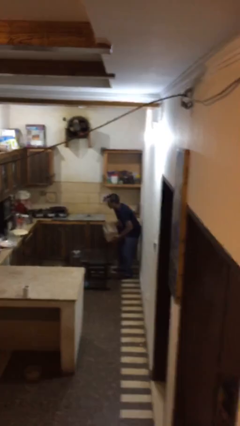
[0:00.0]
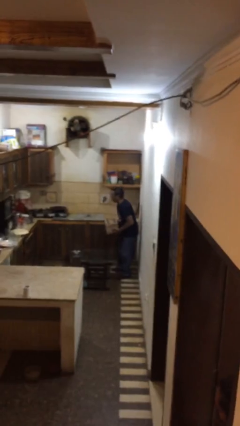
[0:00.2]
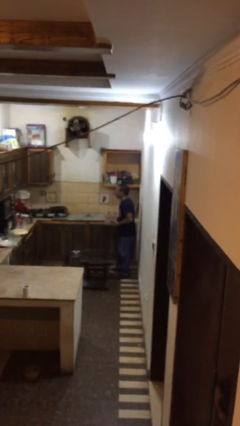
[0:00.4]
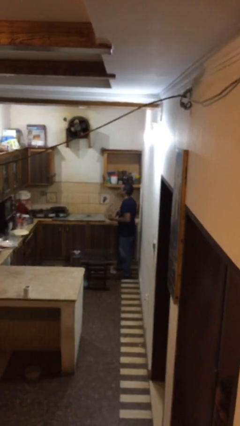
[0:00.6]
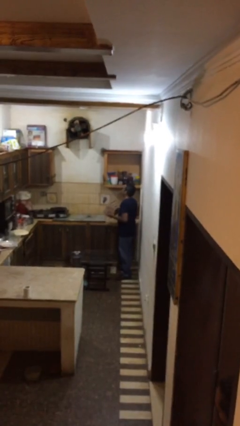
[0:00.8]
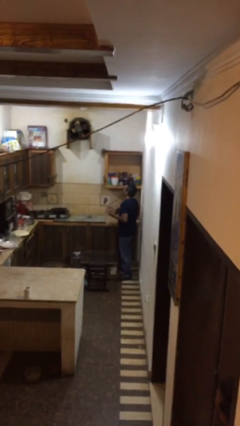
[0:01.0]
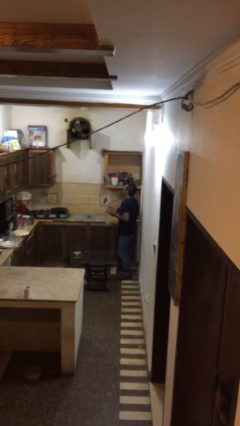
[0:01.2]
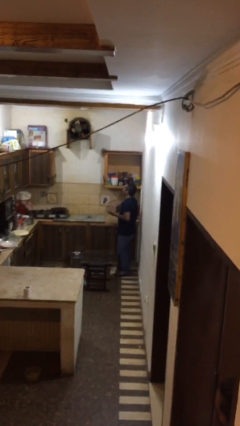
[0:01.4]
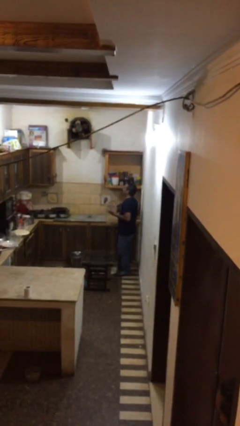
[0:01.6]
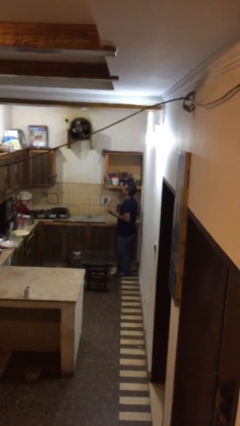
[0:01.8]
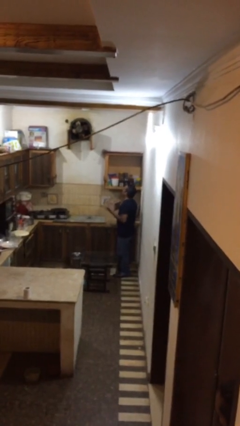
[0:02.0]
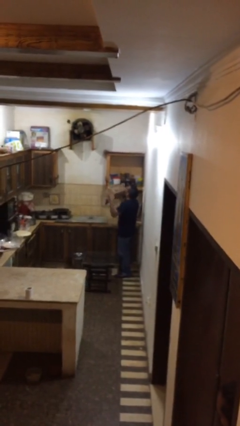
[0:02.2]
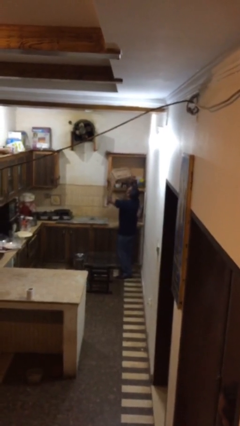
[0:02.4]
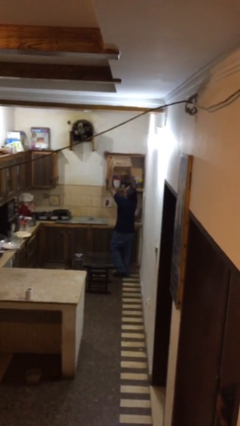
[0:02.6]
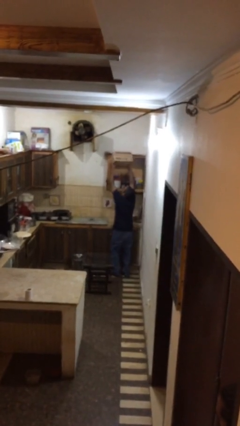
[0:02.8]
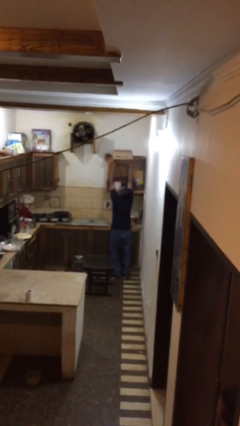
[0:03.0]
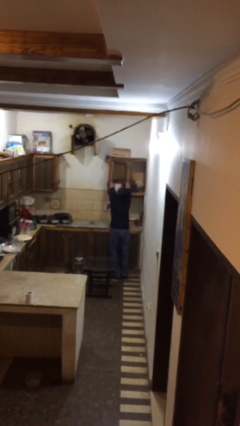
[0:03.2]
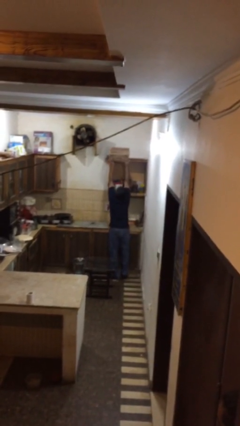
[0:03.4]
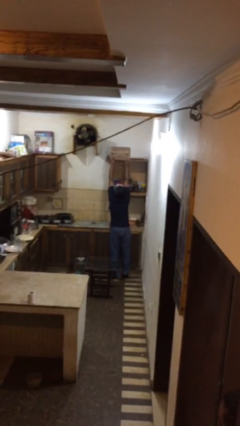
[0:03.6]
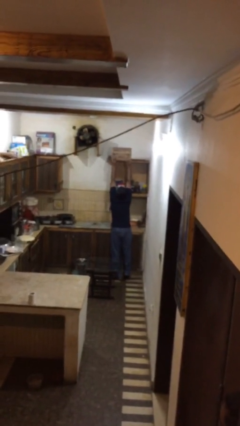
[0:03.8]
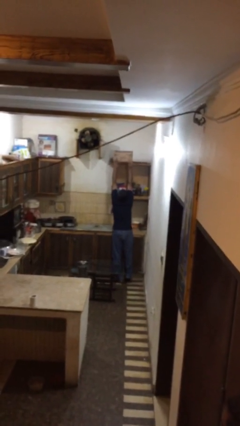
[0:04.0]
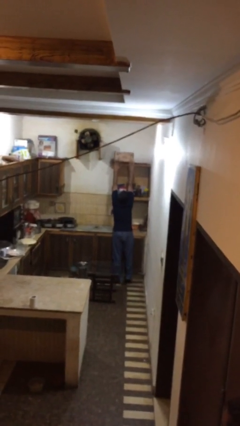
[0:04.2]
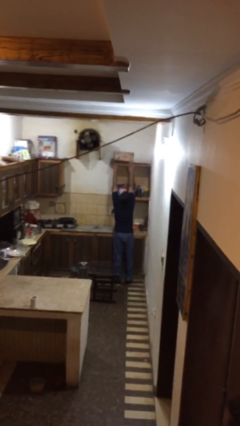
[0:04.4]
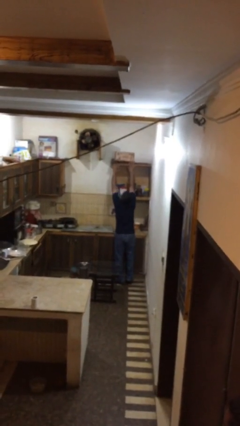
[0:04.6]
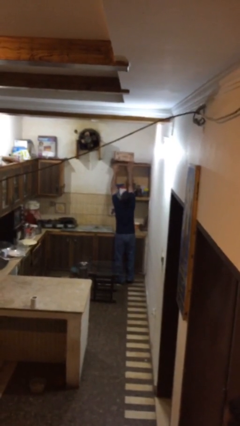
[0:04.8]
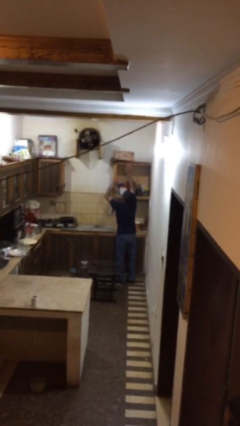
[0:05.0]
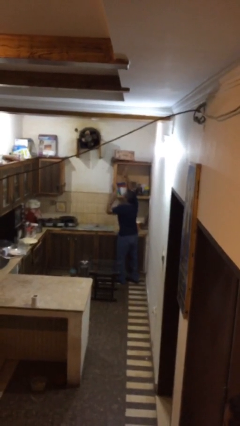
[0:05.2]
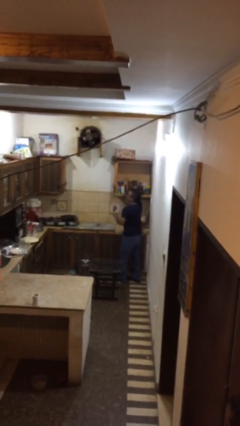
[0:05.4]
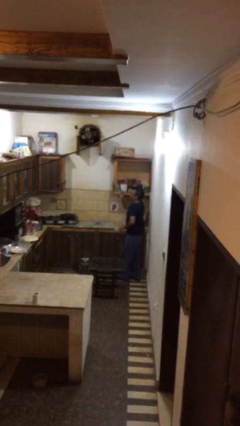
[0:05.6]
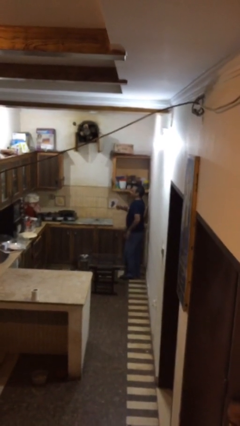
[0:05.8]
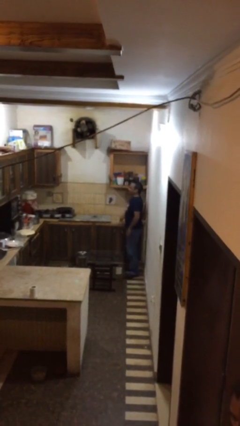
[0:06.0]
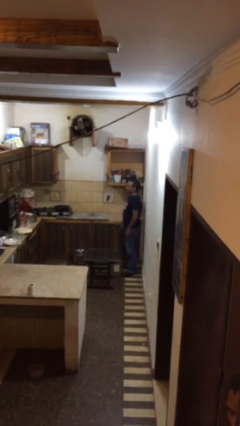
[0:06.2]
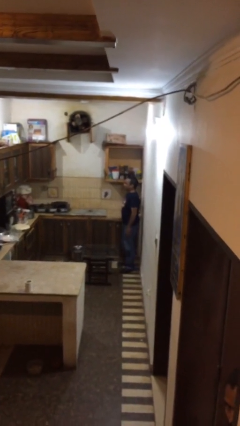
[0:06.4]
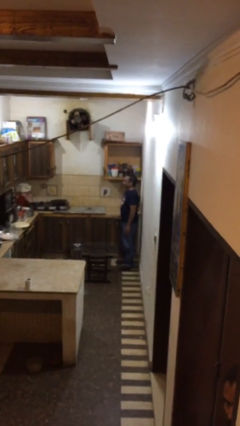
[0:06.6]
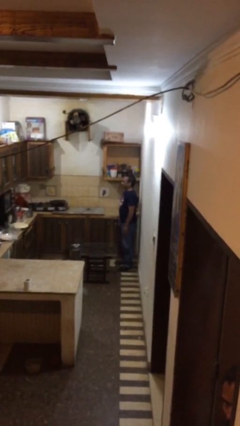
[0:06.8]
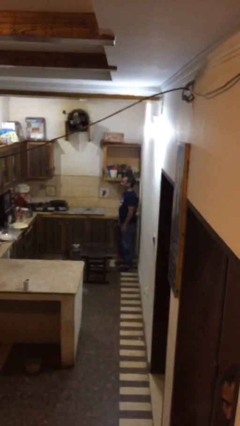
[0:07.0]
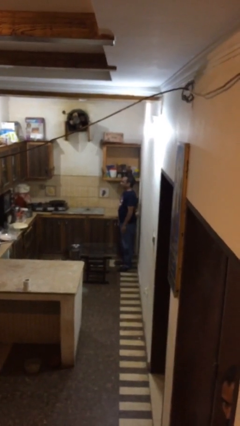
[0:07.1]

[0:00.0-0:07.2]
person puts down object on shelf

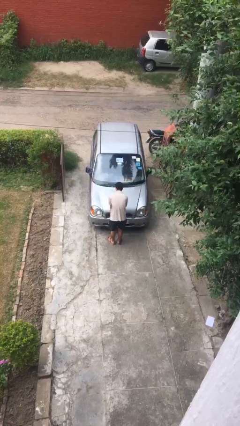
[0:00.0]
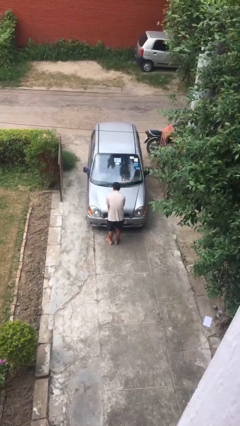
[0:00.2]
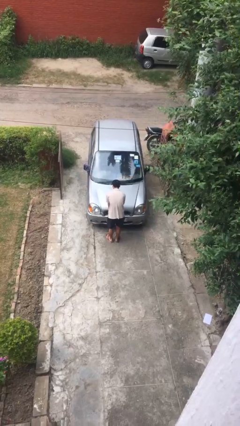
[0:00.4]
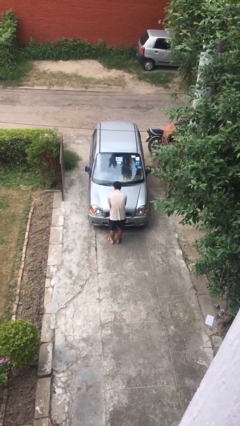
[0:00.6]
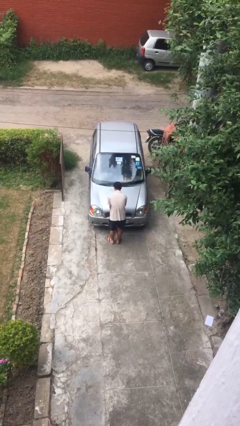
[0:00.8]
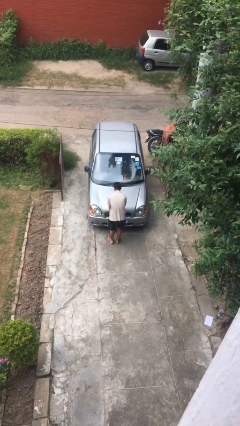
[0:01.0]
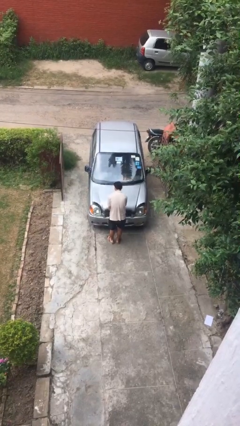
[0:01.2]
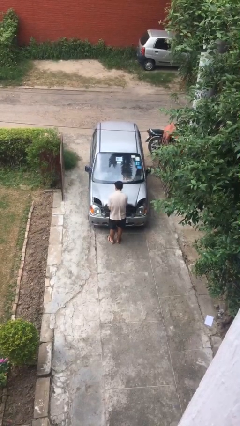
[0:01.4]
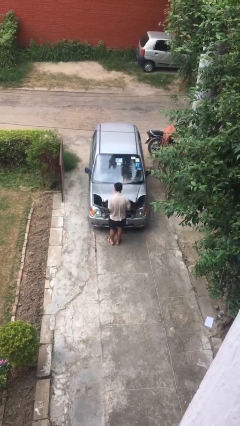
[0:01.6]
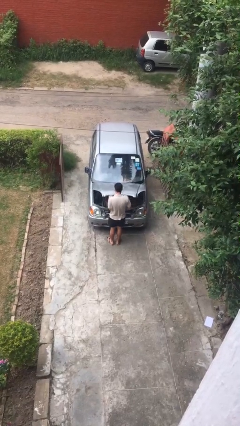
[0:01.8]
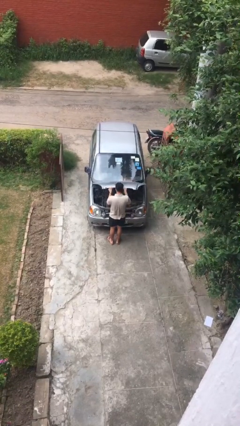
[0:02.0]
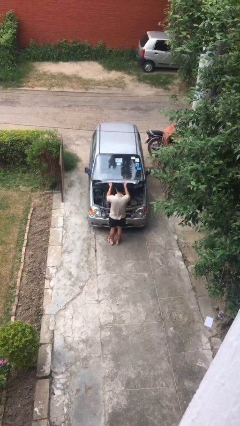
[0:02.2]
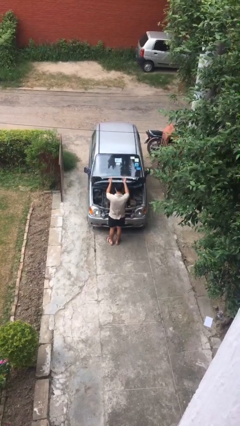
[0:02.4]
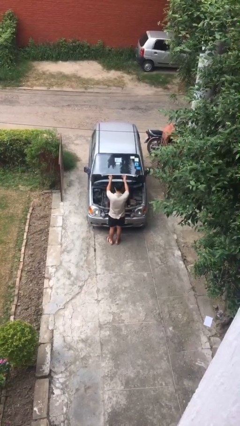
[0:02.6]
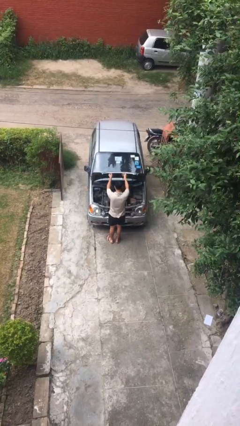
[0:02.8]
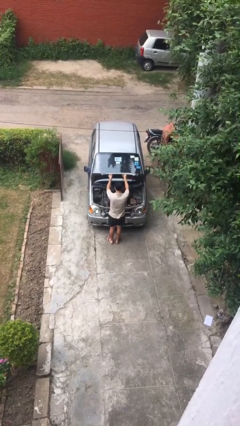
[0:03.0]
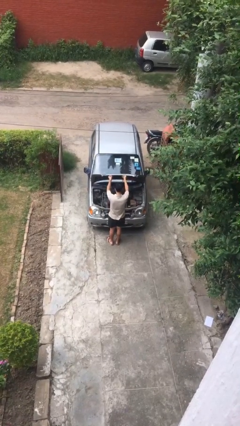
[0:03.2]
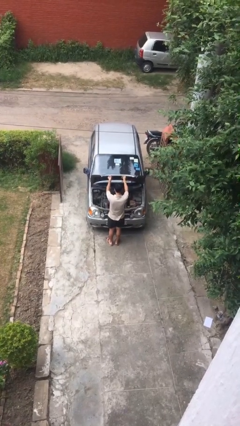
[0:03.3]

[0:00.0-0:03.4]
person opens car hood

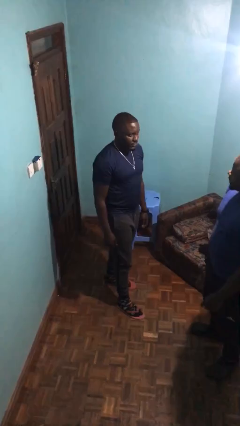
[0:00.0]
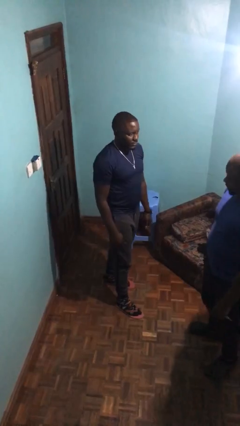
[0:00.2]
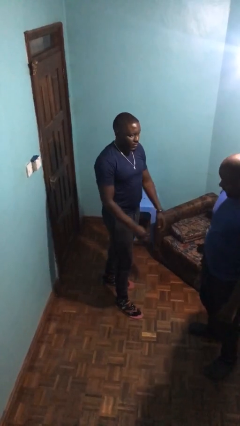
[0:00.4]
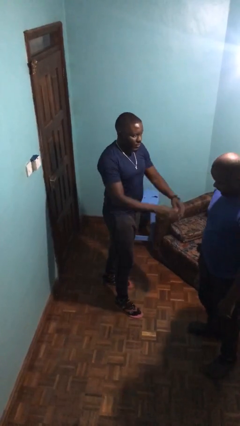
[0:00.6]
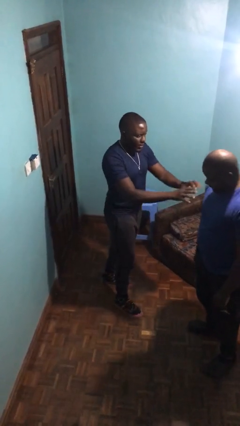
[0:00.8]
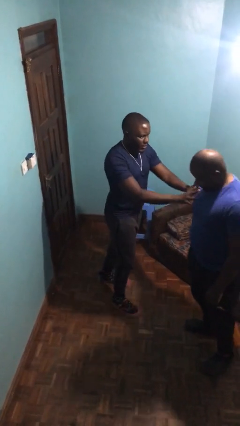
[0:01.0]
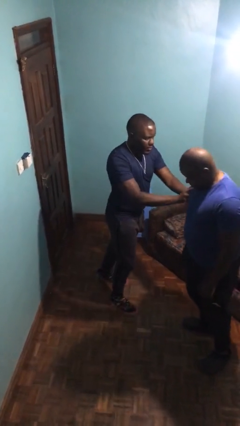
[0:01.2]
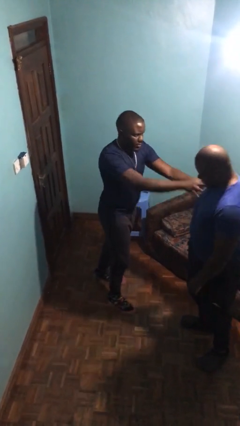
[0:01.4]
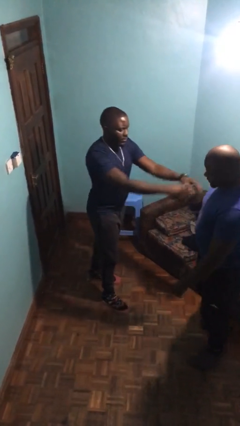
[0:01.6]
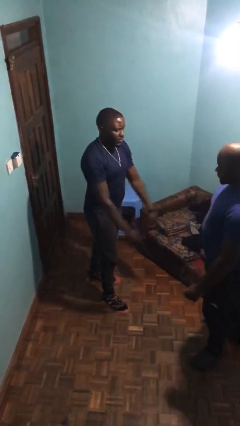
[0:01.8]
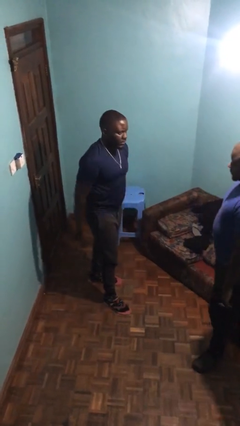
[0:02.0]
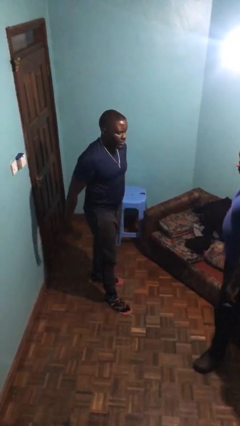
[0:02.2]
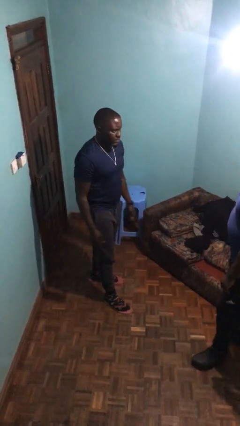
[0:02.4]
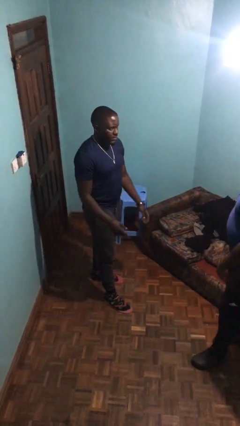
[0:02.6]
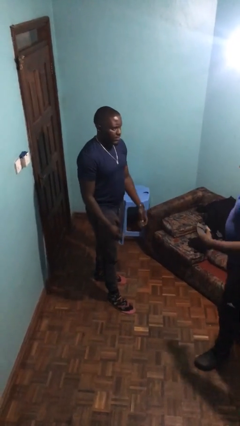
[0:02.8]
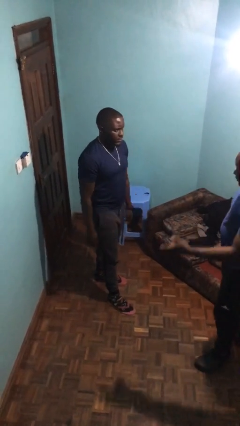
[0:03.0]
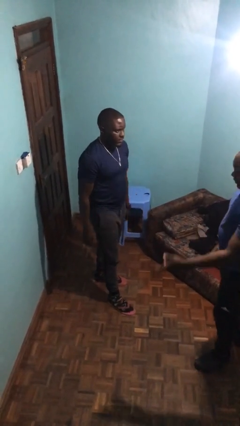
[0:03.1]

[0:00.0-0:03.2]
person shoves person

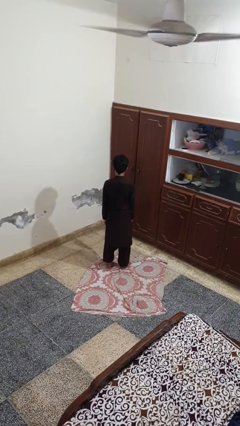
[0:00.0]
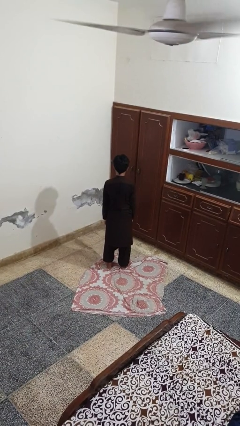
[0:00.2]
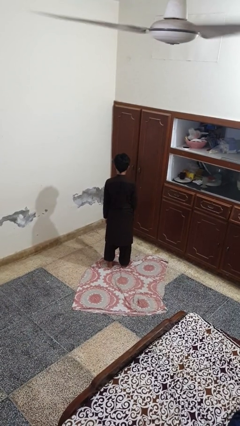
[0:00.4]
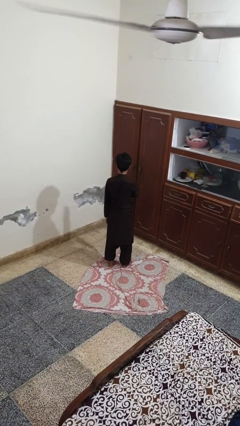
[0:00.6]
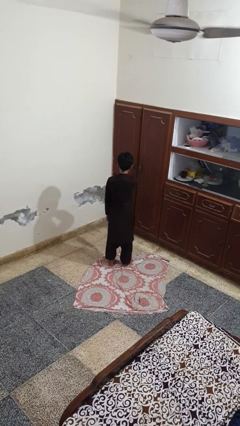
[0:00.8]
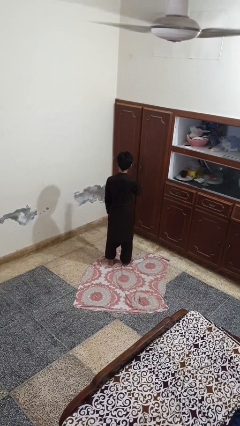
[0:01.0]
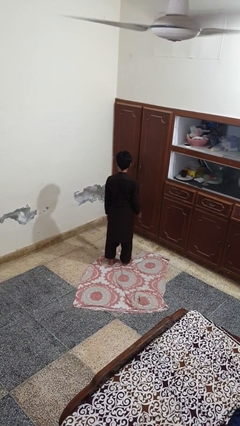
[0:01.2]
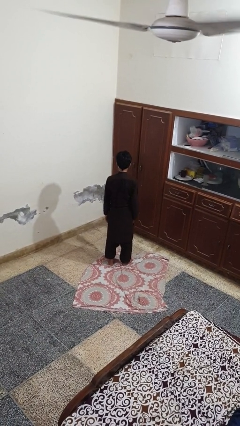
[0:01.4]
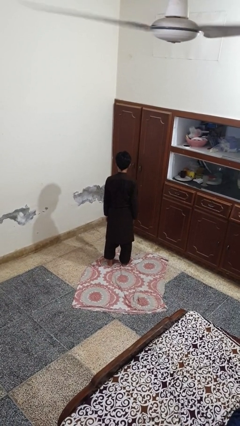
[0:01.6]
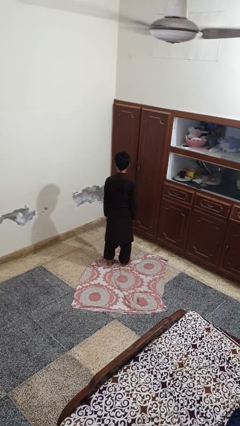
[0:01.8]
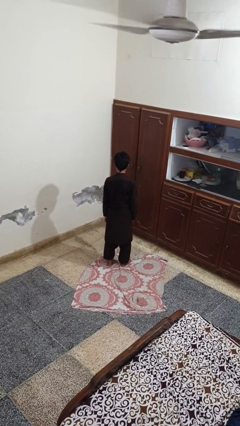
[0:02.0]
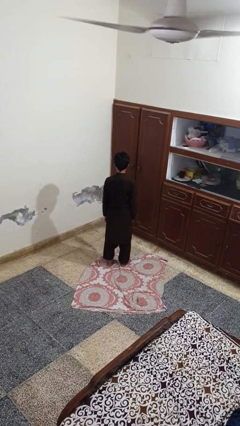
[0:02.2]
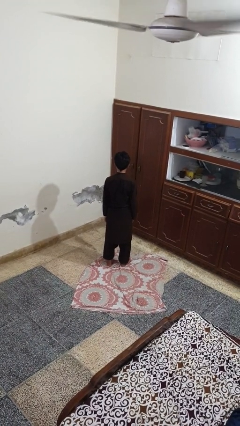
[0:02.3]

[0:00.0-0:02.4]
person karate chop

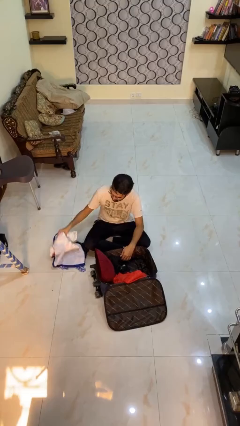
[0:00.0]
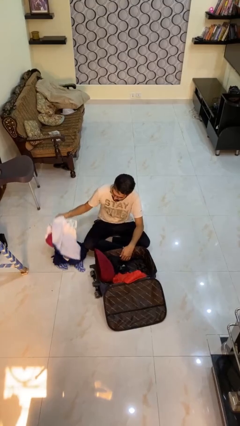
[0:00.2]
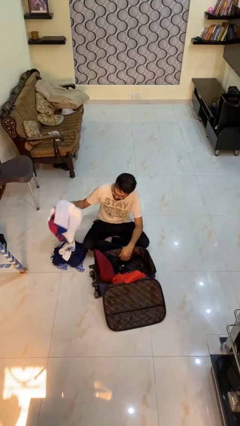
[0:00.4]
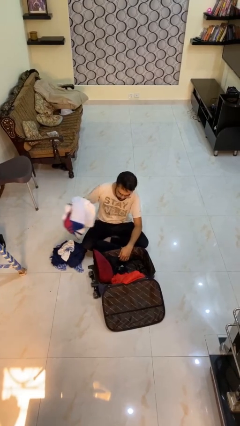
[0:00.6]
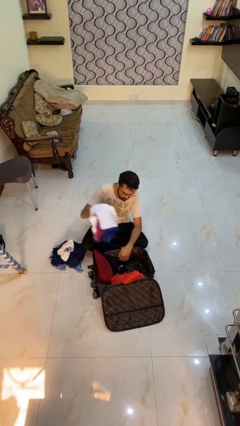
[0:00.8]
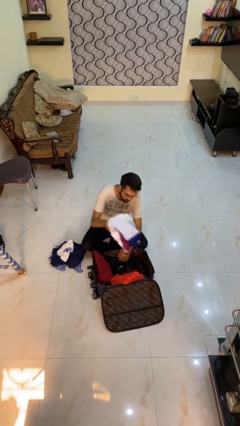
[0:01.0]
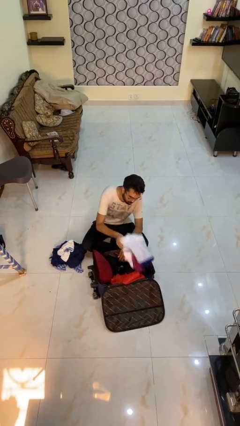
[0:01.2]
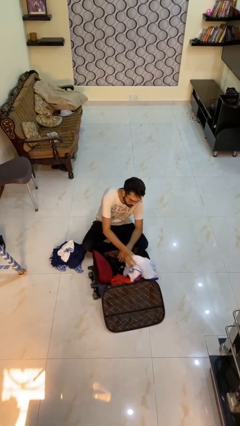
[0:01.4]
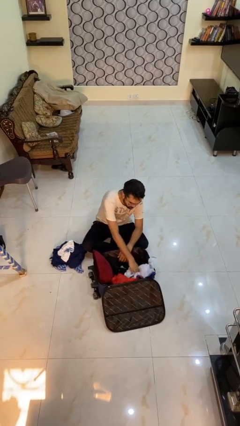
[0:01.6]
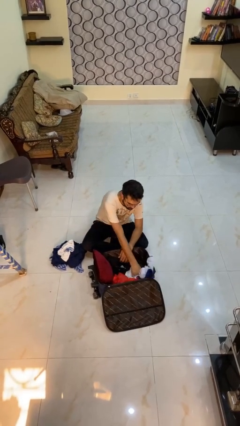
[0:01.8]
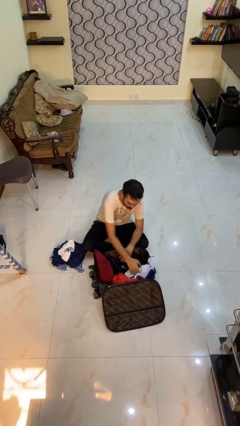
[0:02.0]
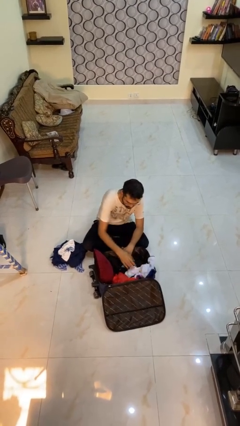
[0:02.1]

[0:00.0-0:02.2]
person loads clothes into suitcase
